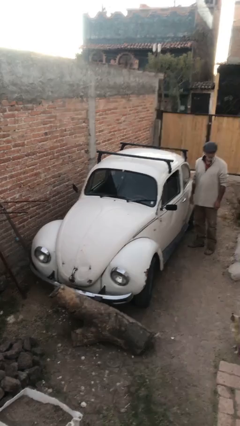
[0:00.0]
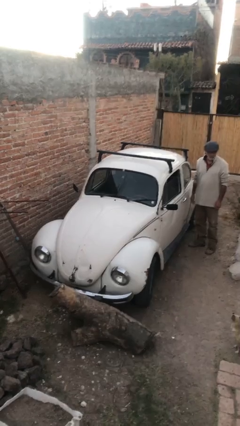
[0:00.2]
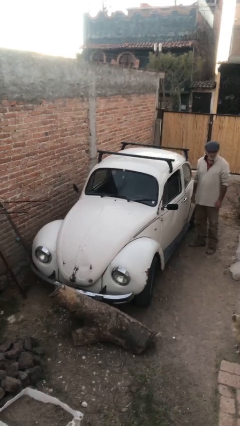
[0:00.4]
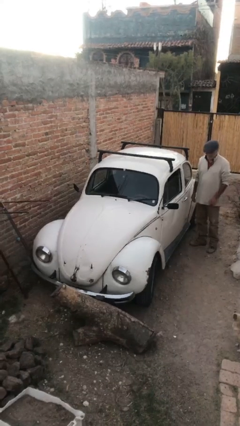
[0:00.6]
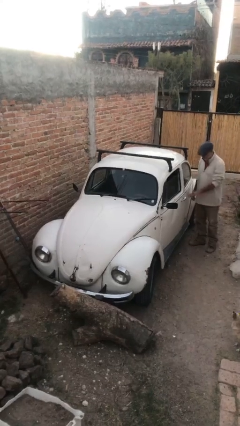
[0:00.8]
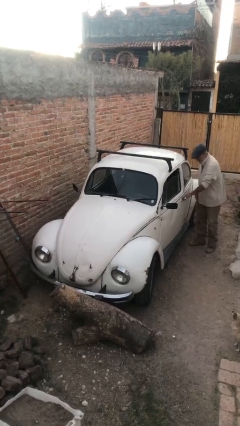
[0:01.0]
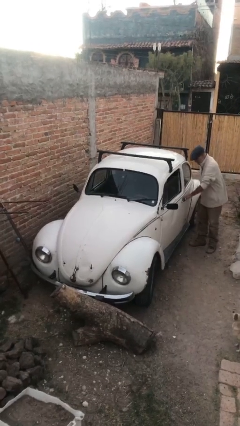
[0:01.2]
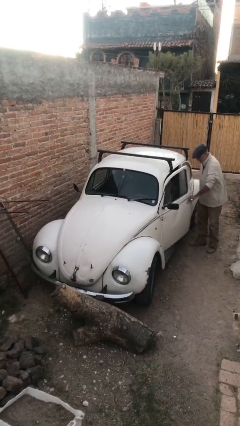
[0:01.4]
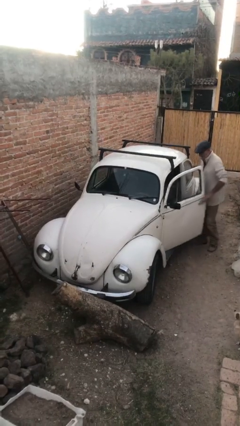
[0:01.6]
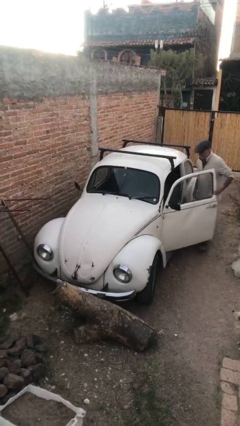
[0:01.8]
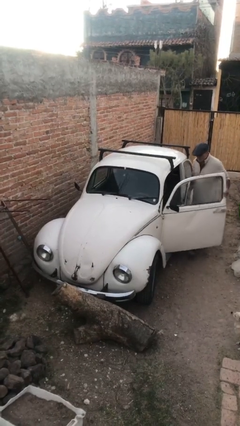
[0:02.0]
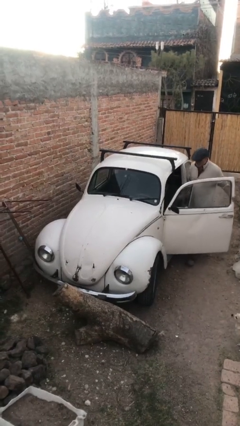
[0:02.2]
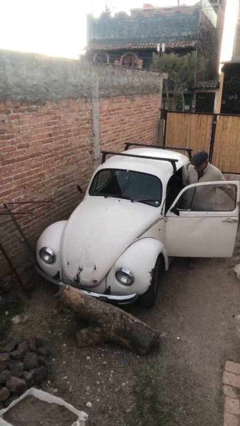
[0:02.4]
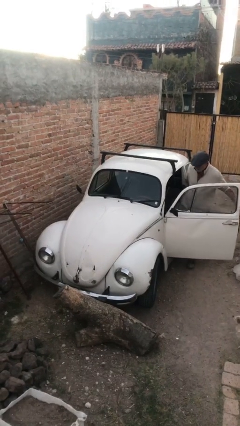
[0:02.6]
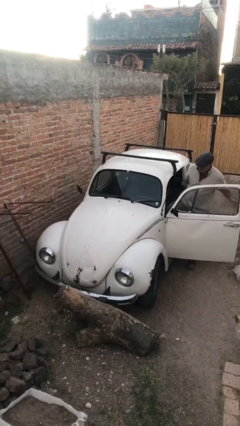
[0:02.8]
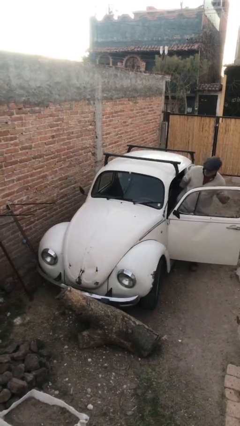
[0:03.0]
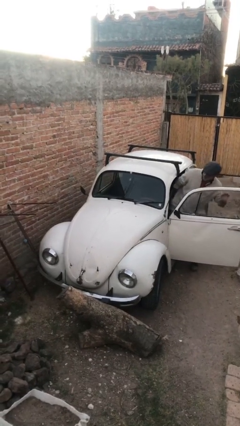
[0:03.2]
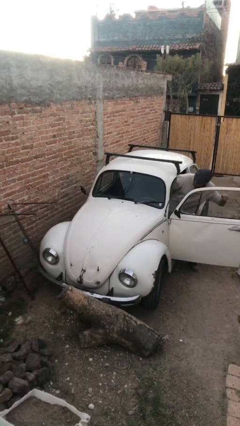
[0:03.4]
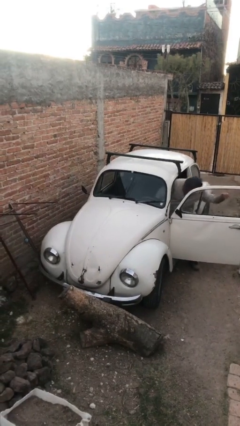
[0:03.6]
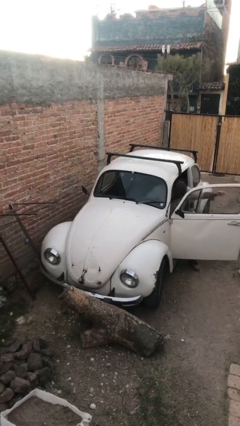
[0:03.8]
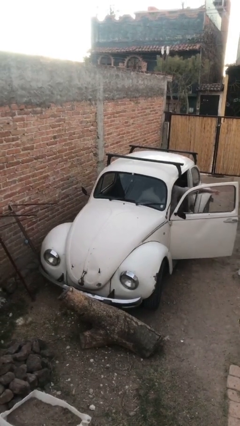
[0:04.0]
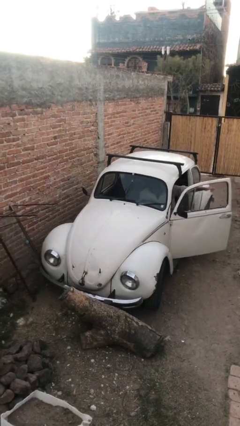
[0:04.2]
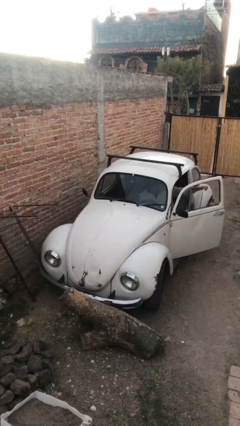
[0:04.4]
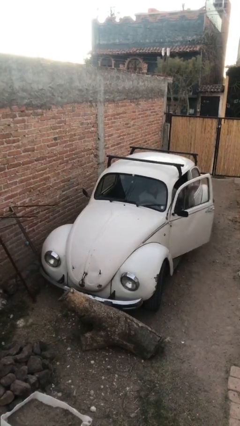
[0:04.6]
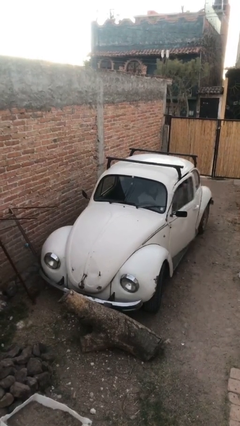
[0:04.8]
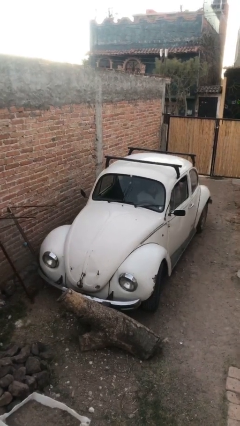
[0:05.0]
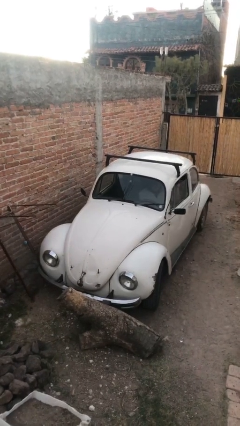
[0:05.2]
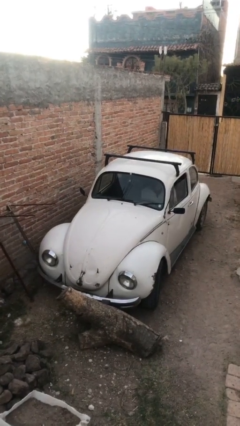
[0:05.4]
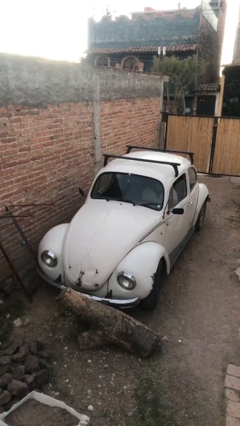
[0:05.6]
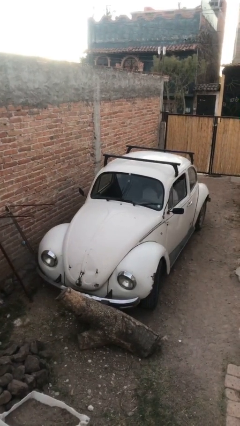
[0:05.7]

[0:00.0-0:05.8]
car picks up person

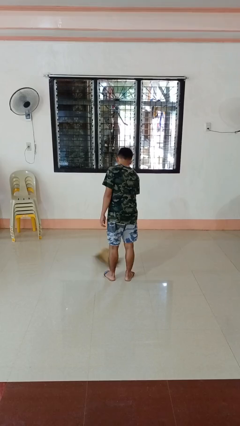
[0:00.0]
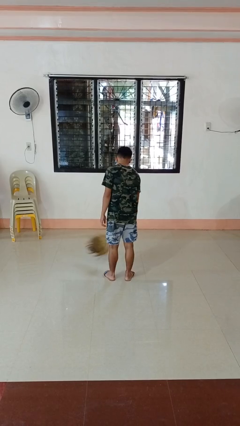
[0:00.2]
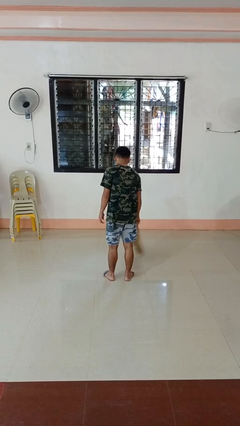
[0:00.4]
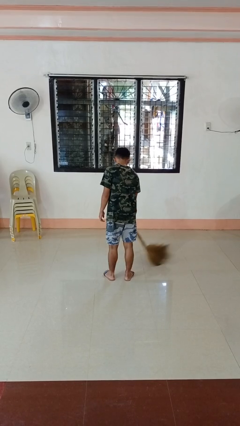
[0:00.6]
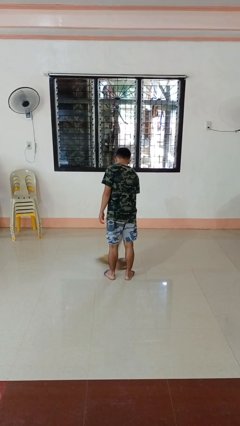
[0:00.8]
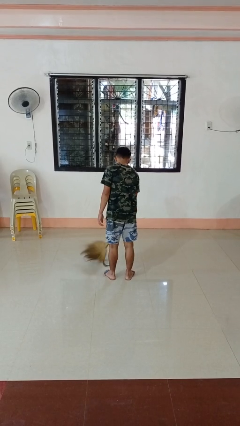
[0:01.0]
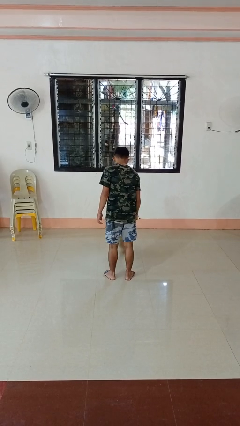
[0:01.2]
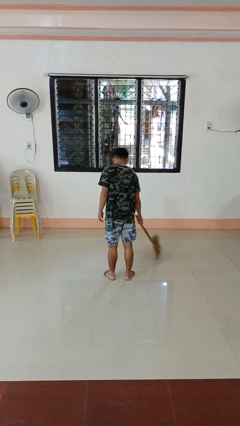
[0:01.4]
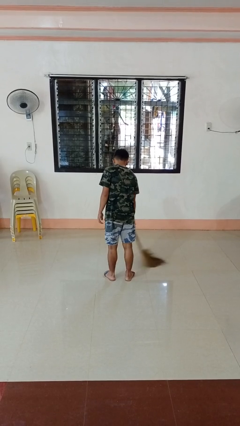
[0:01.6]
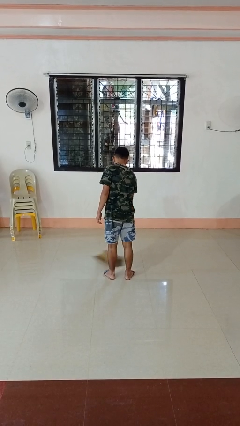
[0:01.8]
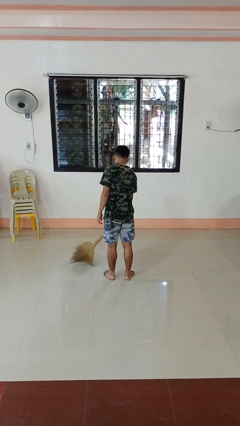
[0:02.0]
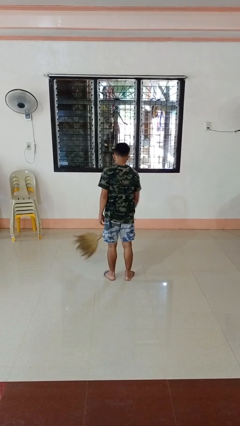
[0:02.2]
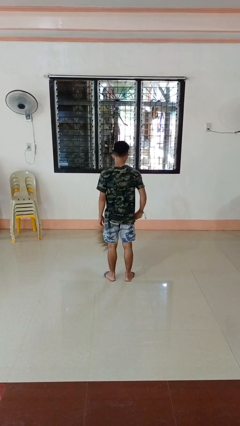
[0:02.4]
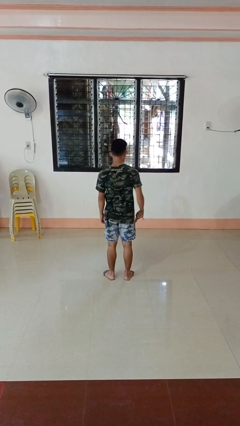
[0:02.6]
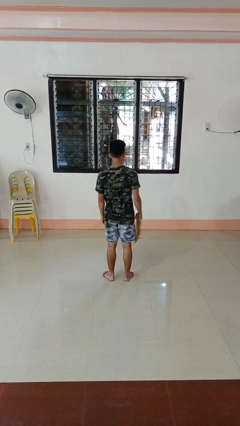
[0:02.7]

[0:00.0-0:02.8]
person sweeps floor

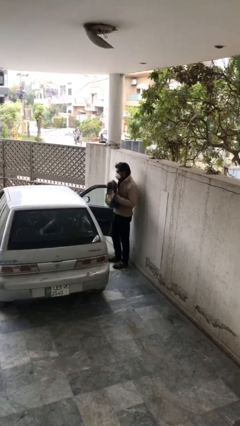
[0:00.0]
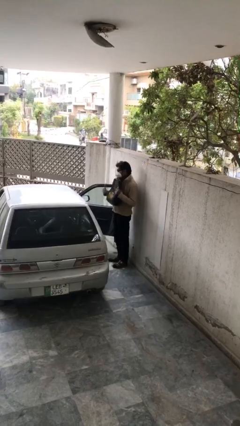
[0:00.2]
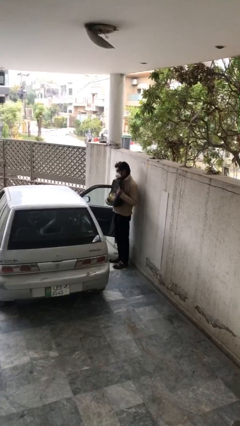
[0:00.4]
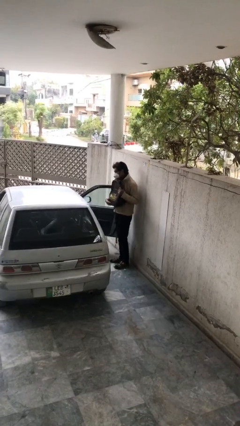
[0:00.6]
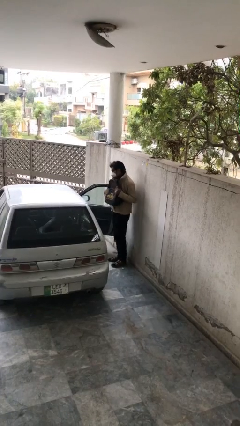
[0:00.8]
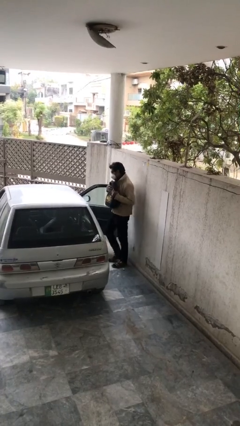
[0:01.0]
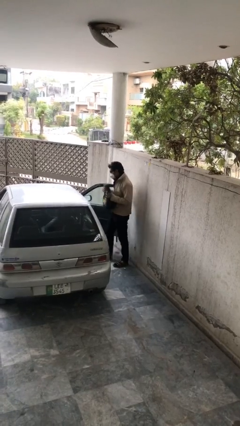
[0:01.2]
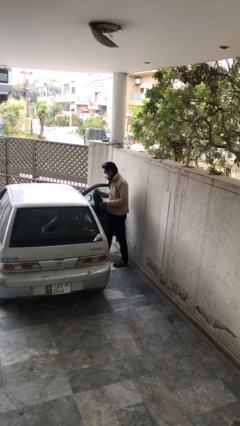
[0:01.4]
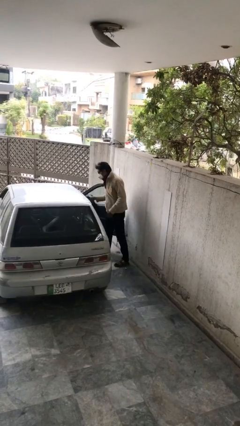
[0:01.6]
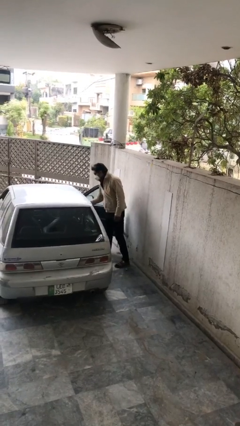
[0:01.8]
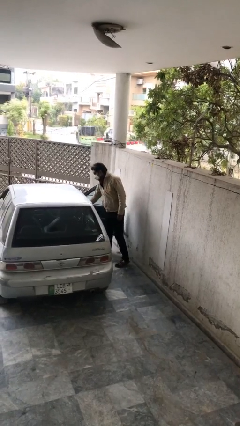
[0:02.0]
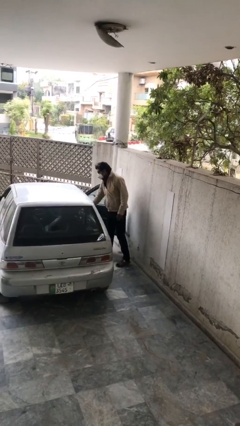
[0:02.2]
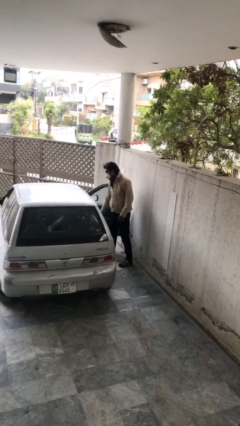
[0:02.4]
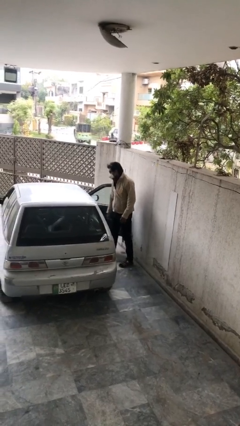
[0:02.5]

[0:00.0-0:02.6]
person loads car

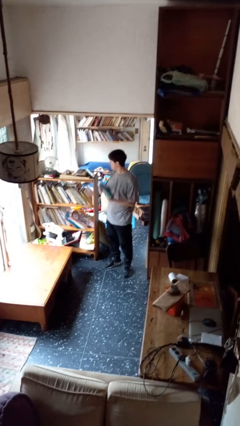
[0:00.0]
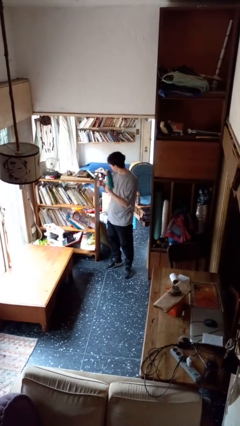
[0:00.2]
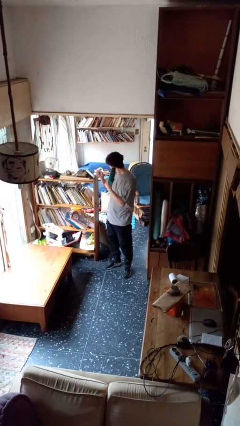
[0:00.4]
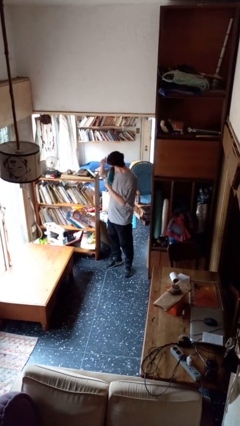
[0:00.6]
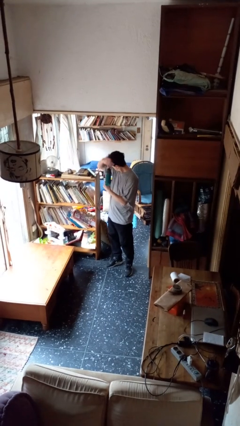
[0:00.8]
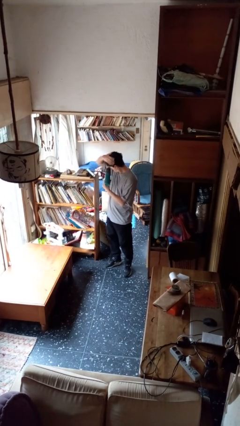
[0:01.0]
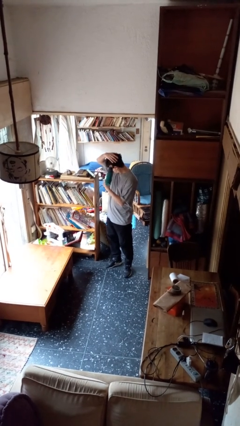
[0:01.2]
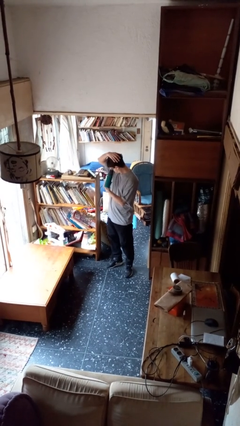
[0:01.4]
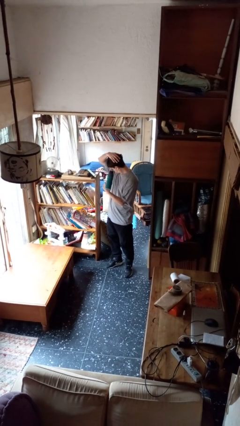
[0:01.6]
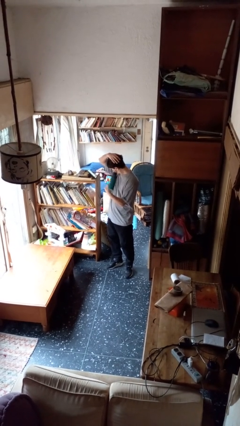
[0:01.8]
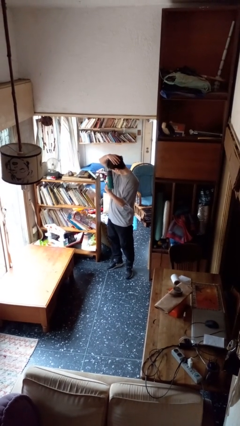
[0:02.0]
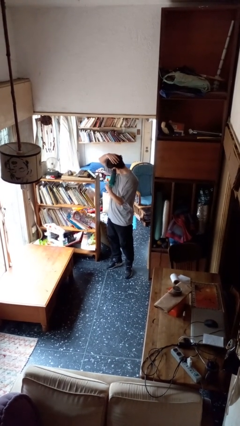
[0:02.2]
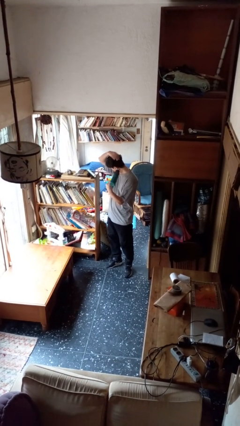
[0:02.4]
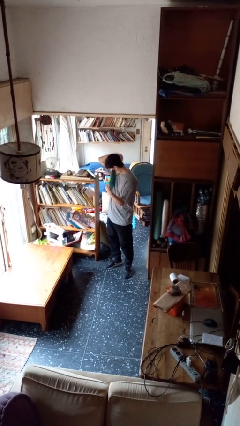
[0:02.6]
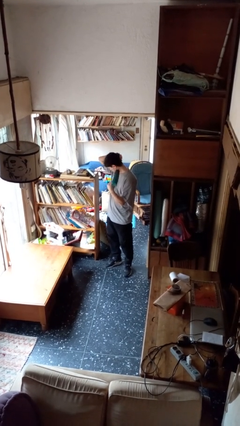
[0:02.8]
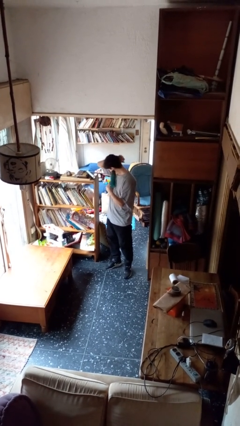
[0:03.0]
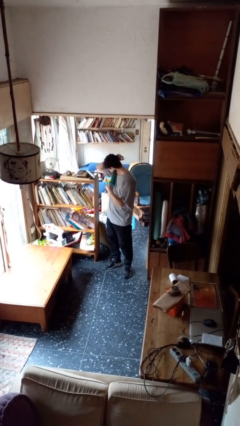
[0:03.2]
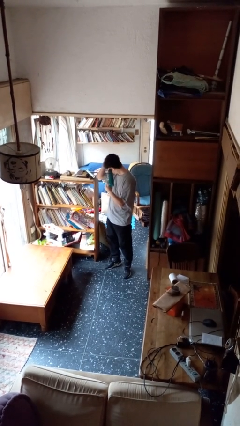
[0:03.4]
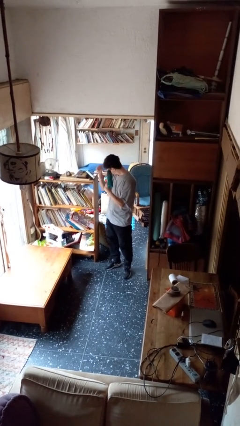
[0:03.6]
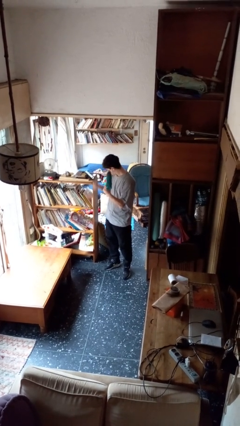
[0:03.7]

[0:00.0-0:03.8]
person dries hair with hairdryer

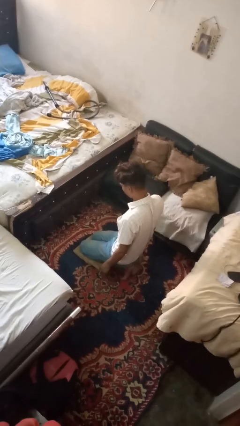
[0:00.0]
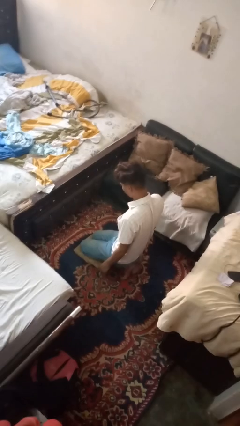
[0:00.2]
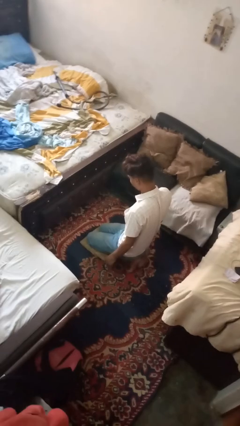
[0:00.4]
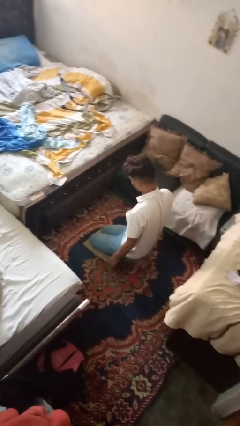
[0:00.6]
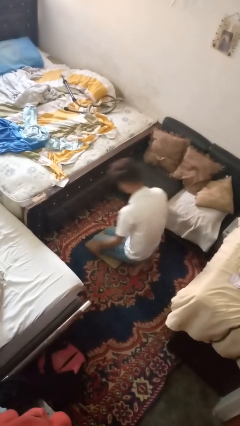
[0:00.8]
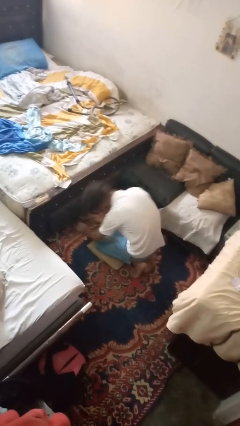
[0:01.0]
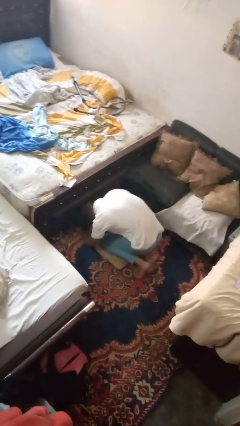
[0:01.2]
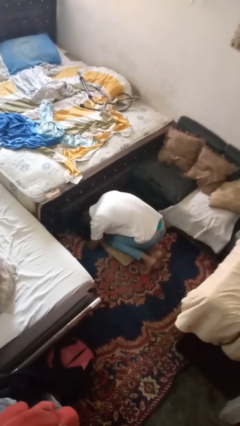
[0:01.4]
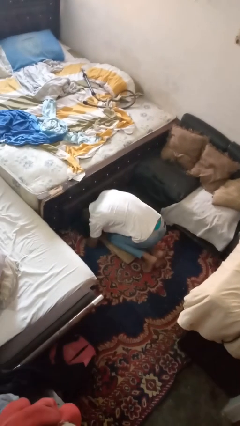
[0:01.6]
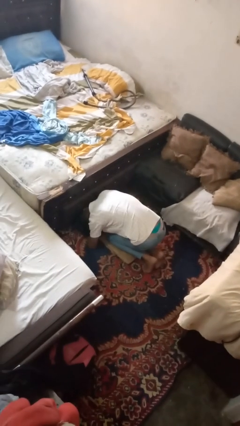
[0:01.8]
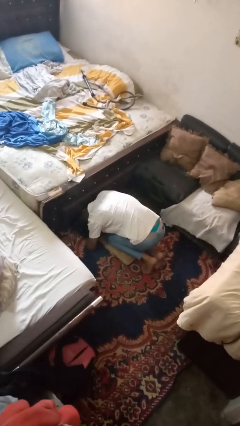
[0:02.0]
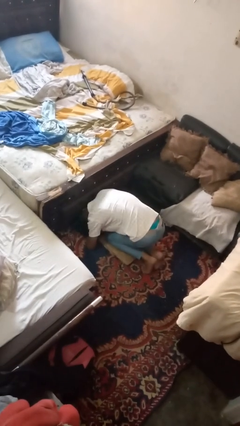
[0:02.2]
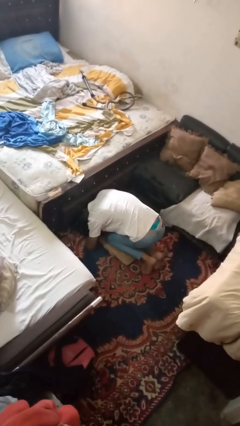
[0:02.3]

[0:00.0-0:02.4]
person searches under bed

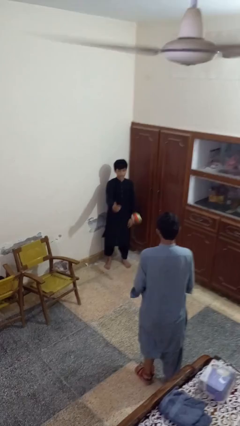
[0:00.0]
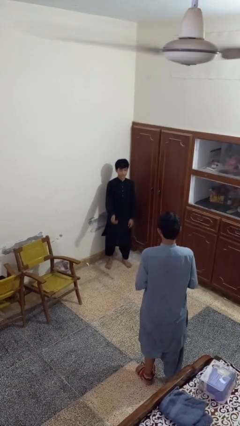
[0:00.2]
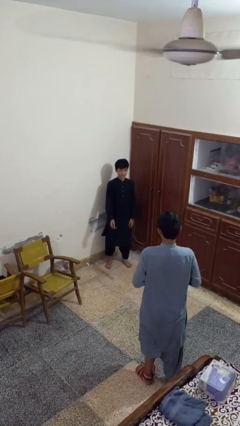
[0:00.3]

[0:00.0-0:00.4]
person throws object to person
